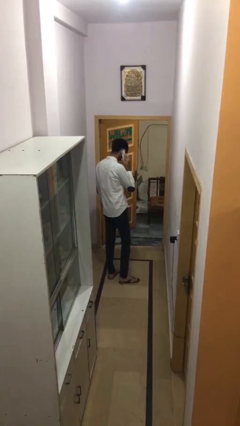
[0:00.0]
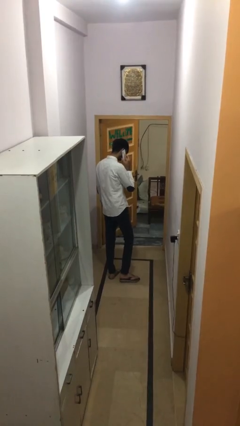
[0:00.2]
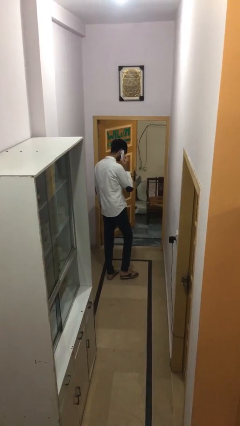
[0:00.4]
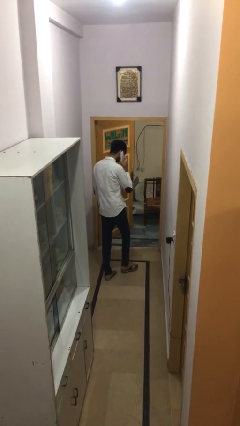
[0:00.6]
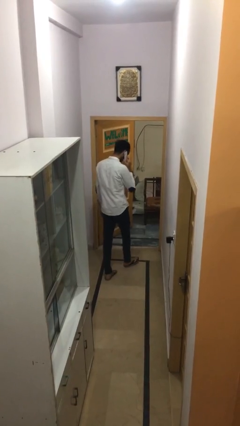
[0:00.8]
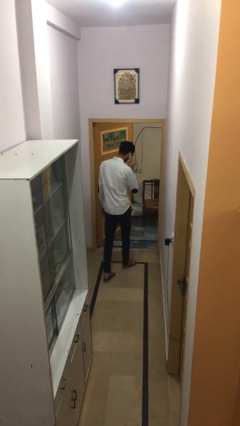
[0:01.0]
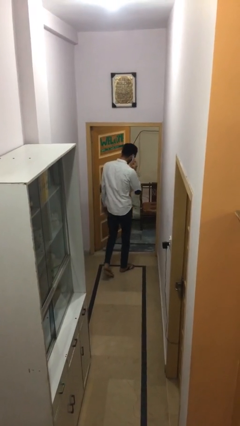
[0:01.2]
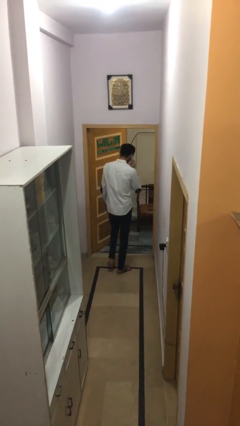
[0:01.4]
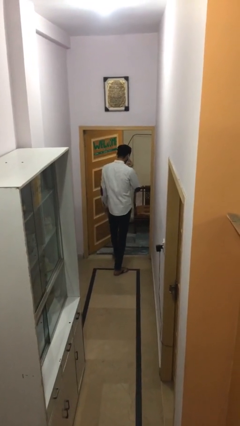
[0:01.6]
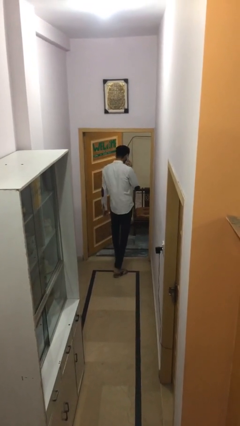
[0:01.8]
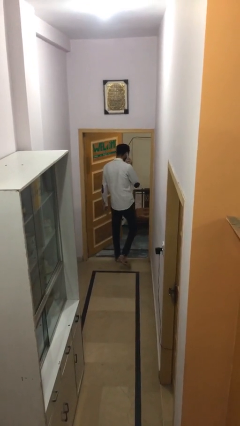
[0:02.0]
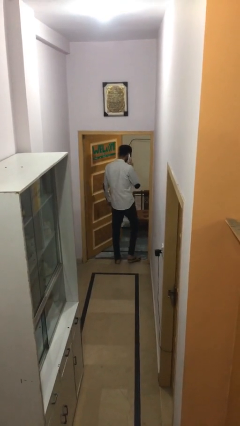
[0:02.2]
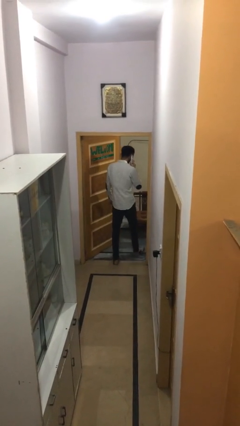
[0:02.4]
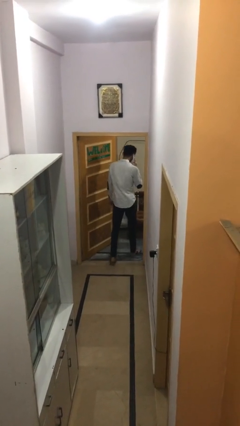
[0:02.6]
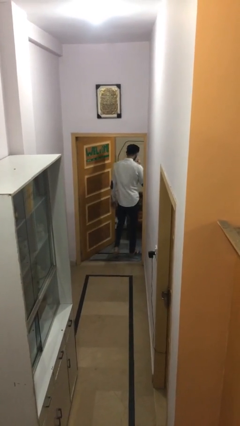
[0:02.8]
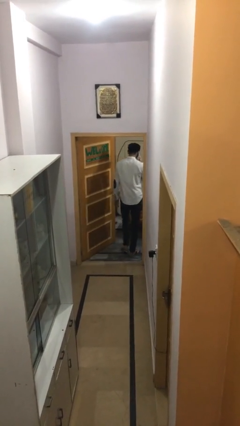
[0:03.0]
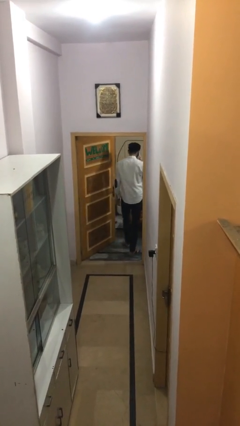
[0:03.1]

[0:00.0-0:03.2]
person exits scene through structure

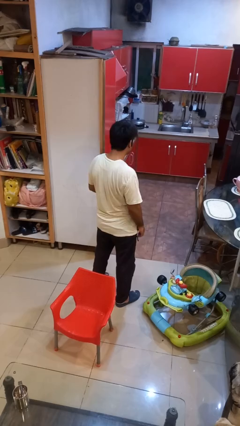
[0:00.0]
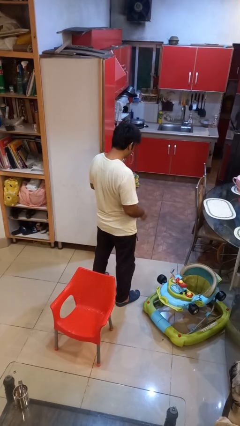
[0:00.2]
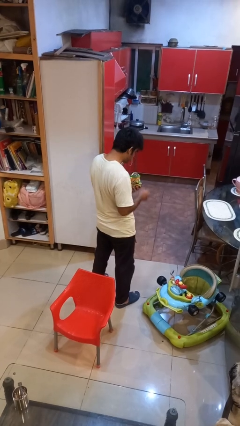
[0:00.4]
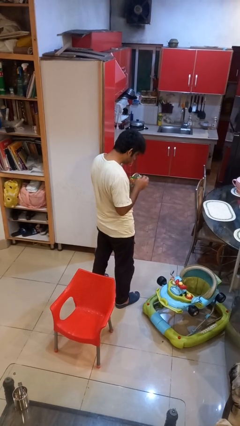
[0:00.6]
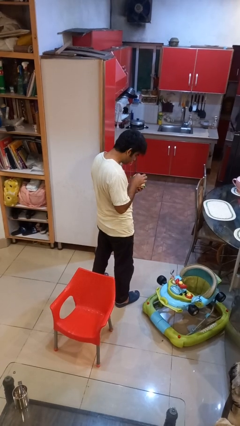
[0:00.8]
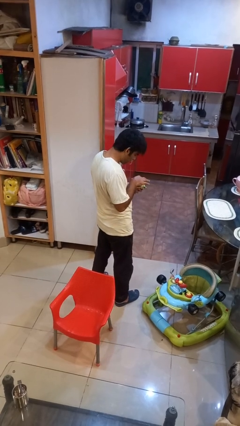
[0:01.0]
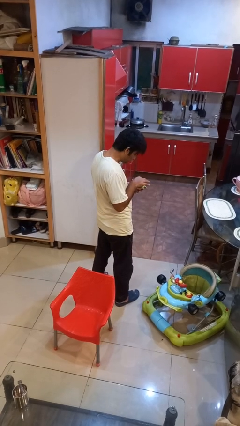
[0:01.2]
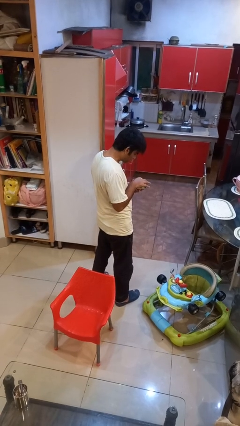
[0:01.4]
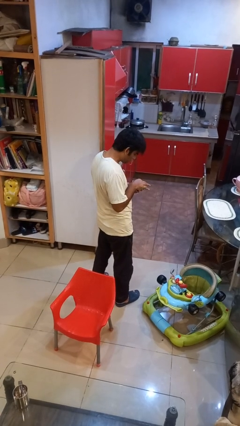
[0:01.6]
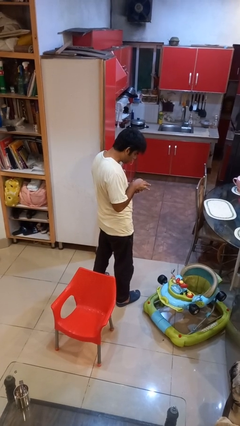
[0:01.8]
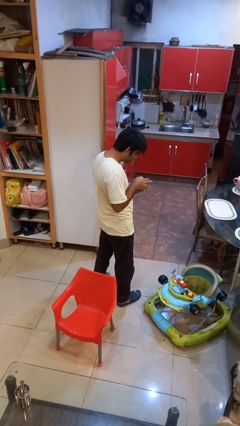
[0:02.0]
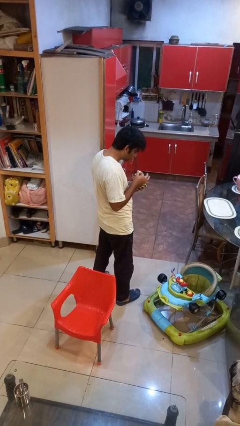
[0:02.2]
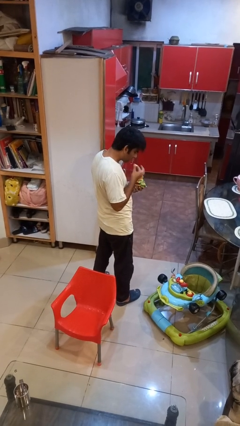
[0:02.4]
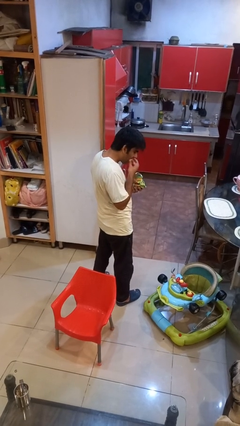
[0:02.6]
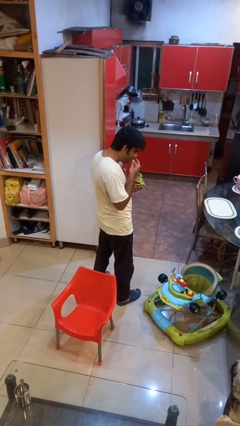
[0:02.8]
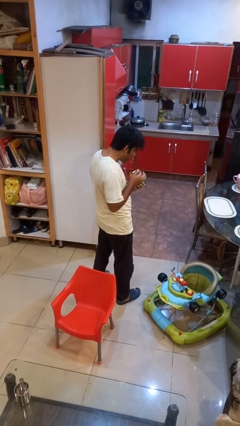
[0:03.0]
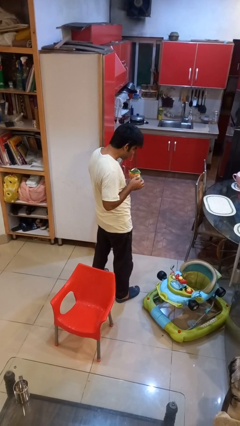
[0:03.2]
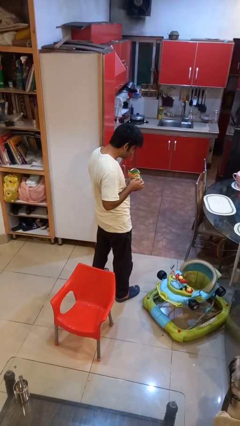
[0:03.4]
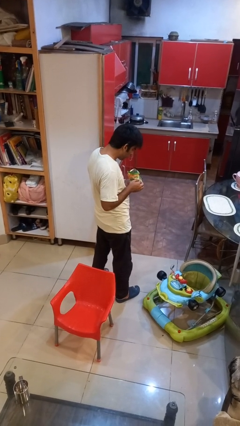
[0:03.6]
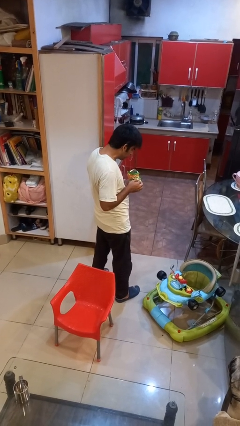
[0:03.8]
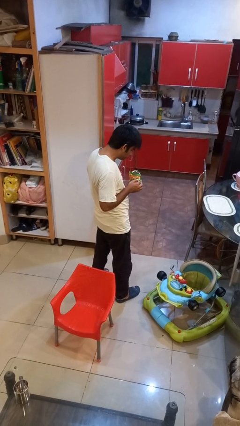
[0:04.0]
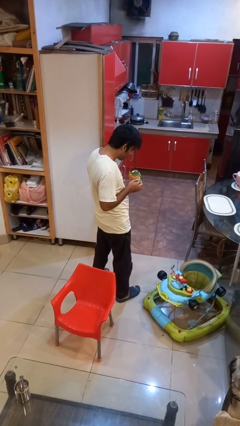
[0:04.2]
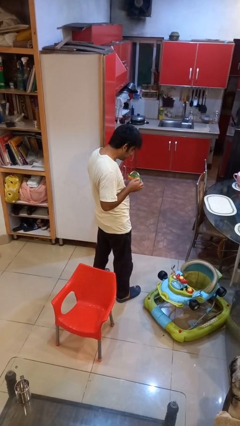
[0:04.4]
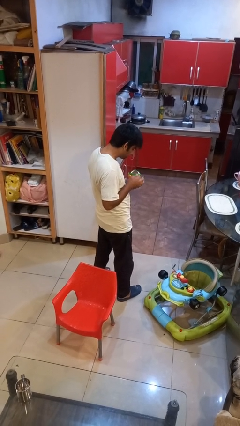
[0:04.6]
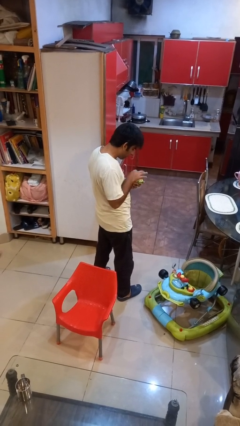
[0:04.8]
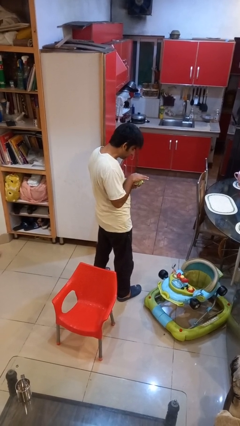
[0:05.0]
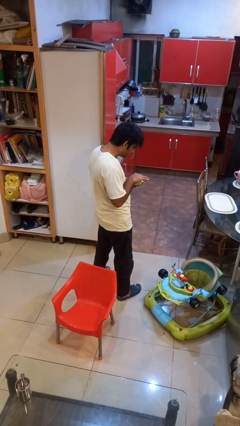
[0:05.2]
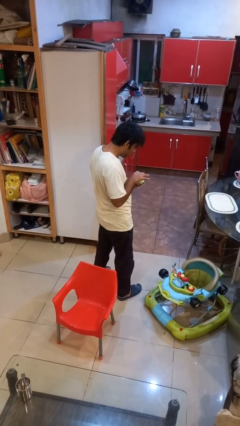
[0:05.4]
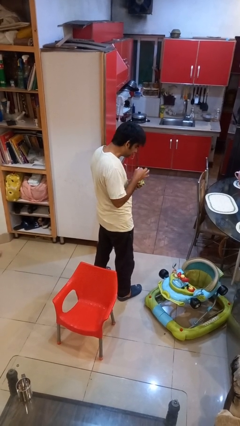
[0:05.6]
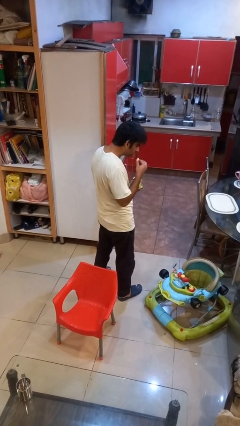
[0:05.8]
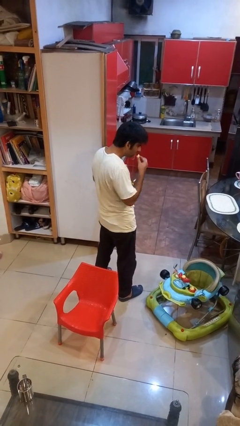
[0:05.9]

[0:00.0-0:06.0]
person eats snack from bag

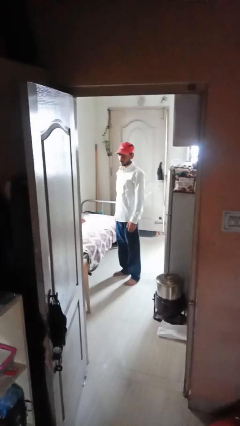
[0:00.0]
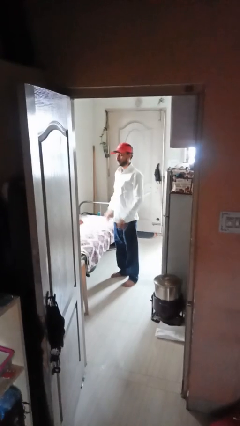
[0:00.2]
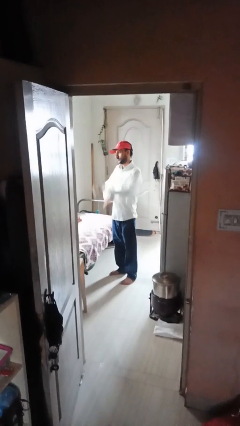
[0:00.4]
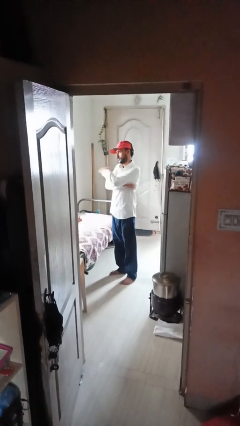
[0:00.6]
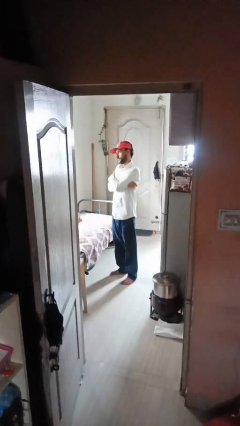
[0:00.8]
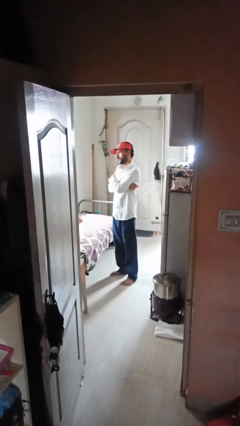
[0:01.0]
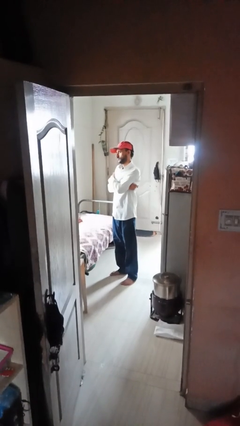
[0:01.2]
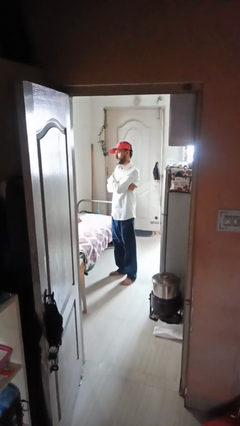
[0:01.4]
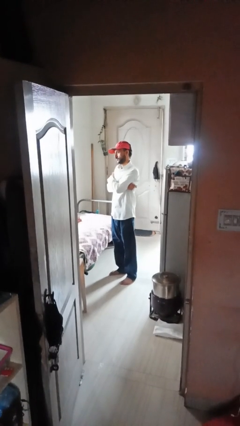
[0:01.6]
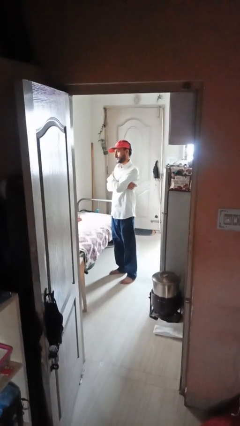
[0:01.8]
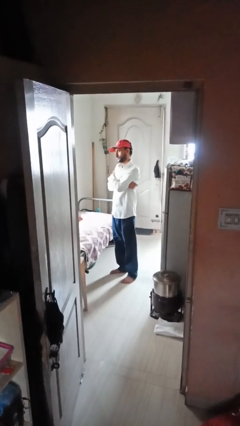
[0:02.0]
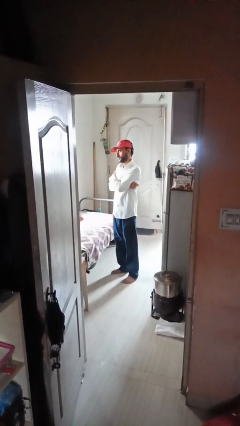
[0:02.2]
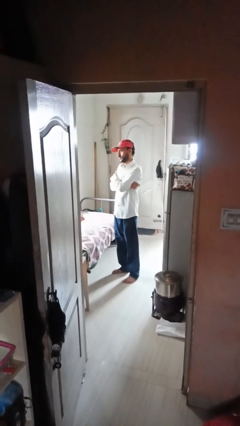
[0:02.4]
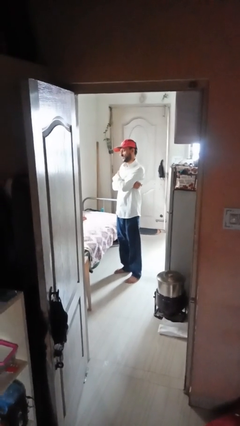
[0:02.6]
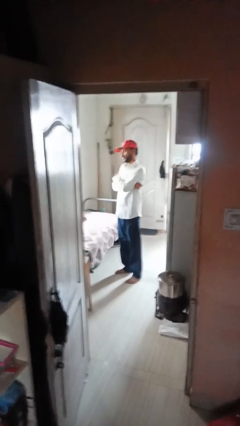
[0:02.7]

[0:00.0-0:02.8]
person crosses arms

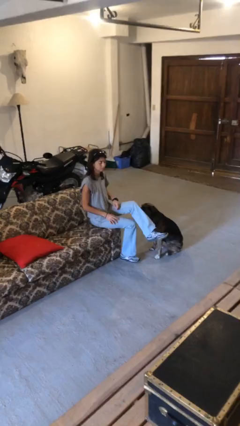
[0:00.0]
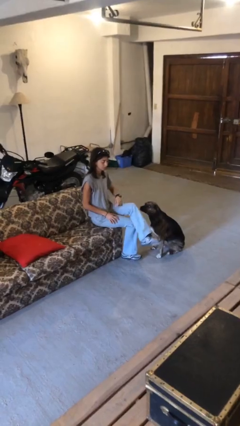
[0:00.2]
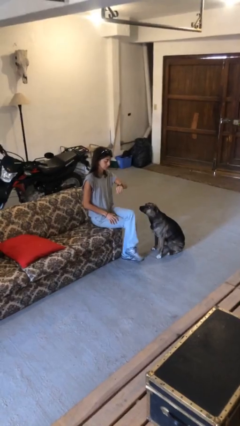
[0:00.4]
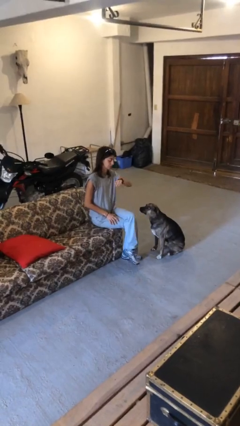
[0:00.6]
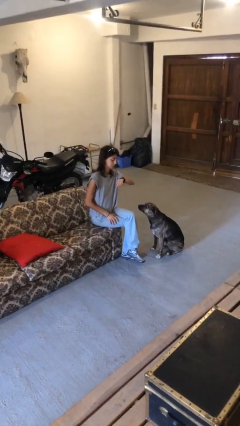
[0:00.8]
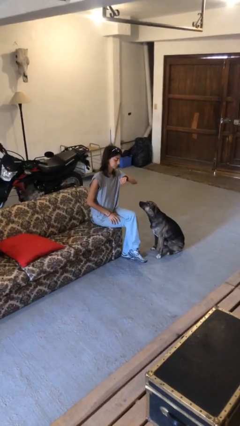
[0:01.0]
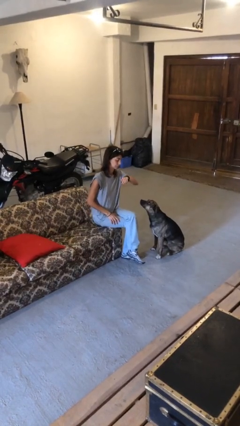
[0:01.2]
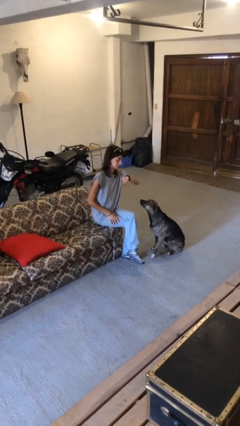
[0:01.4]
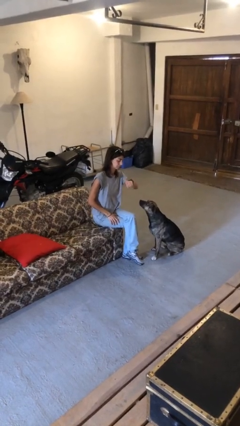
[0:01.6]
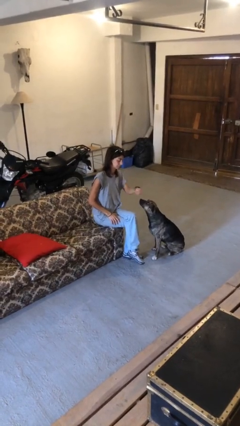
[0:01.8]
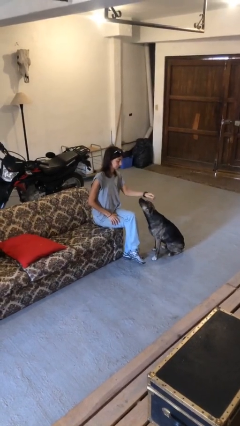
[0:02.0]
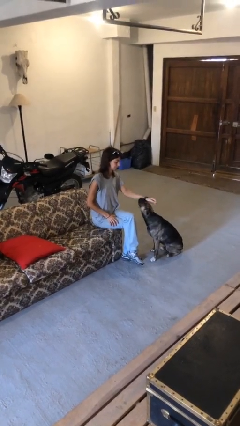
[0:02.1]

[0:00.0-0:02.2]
person looks at wristwatch

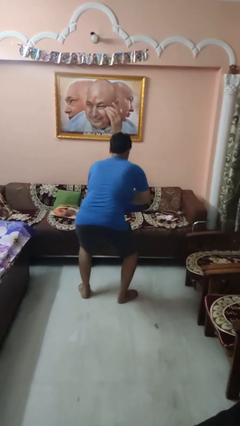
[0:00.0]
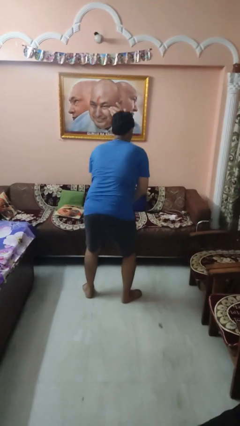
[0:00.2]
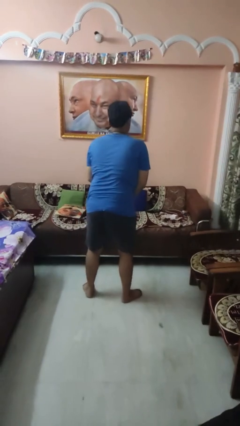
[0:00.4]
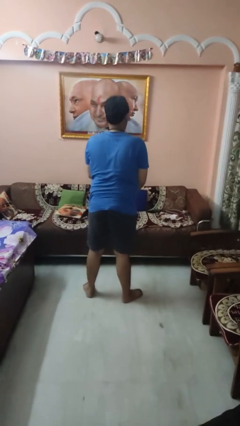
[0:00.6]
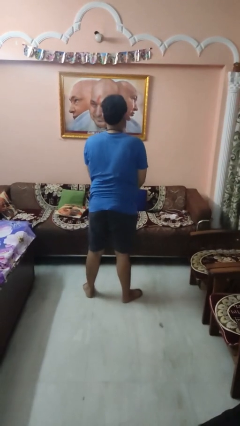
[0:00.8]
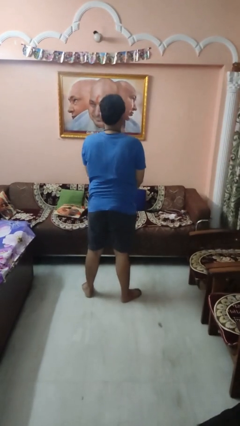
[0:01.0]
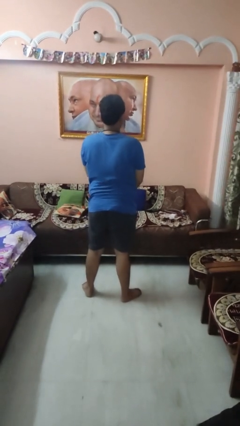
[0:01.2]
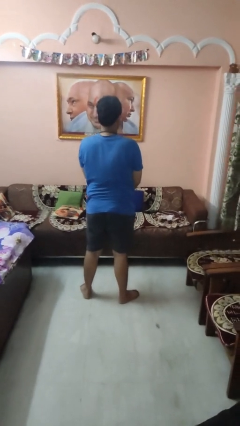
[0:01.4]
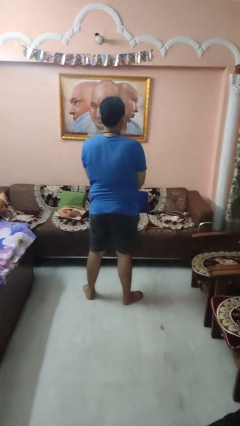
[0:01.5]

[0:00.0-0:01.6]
person stands up

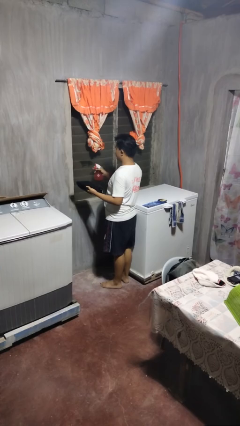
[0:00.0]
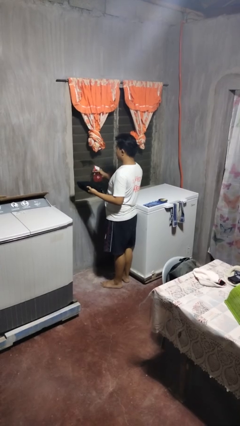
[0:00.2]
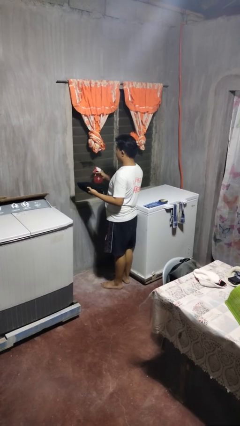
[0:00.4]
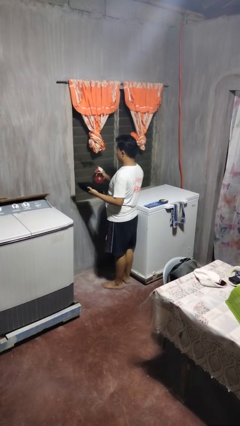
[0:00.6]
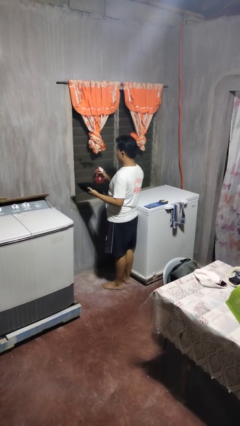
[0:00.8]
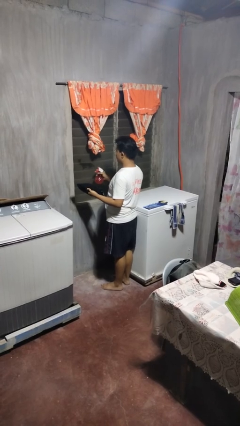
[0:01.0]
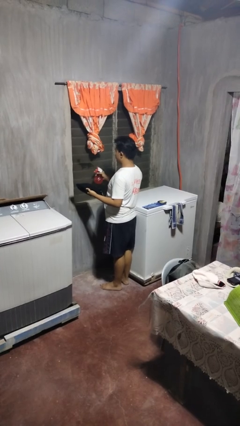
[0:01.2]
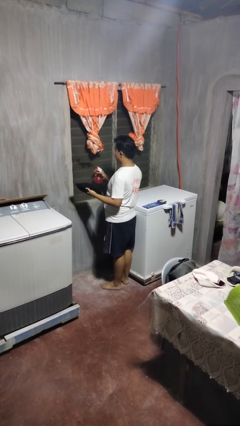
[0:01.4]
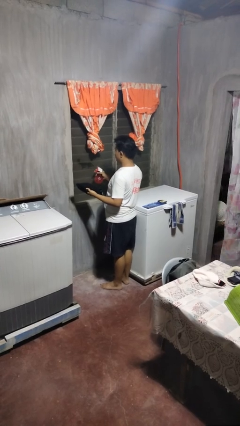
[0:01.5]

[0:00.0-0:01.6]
person sprays from bottle
